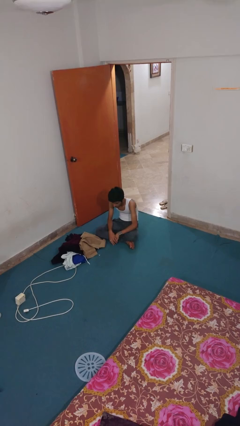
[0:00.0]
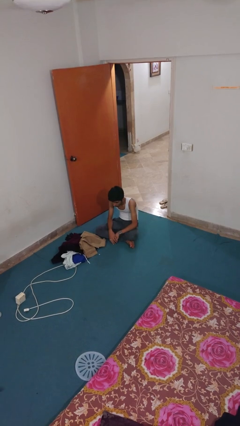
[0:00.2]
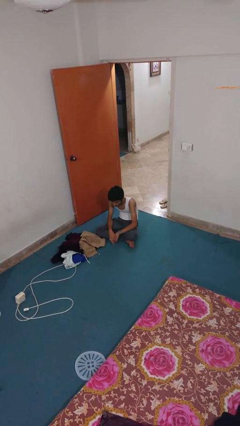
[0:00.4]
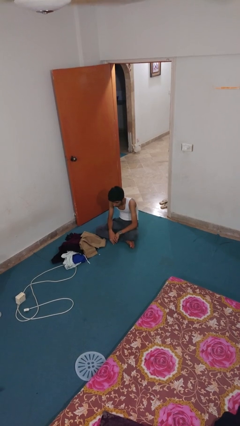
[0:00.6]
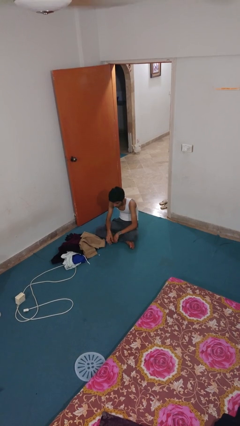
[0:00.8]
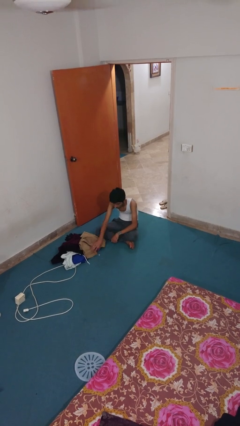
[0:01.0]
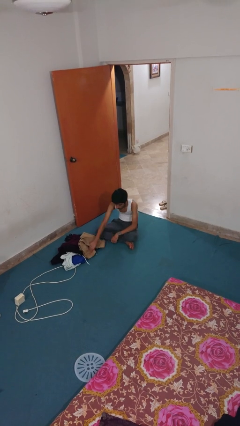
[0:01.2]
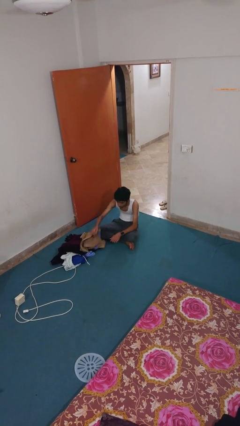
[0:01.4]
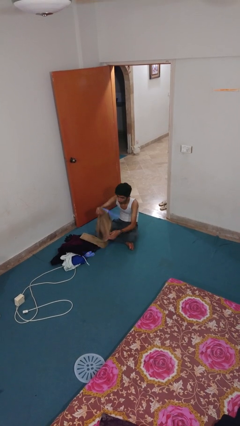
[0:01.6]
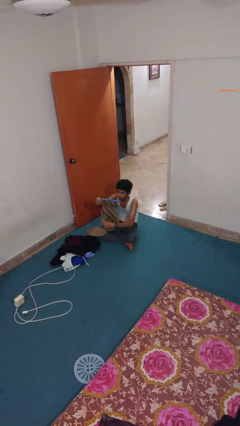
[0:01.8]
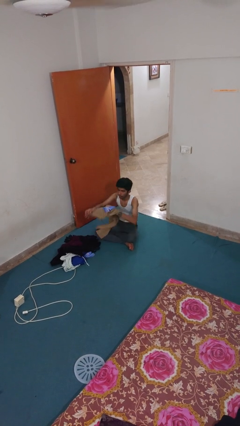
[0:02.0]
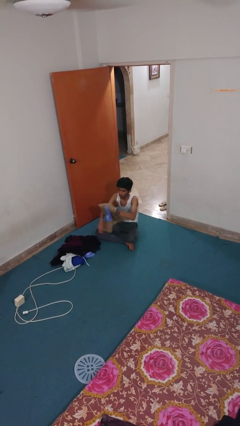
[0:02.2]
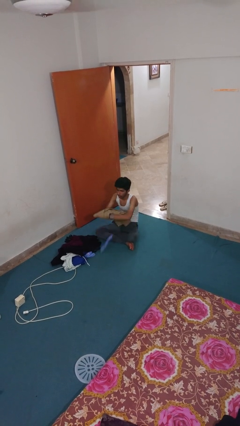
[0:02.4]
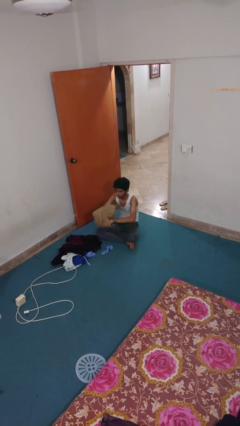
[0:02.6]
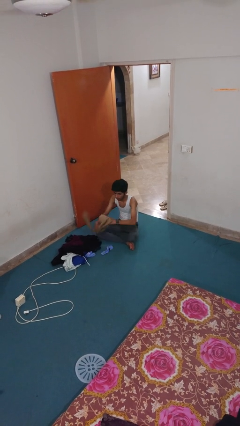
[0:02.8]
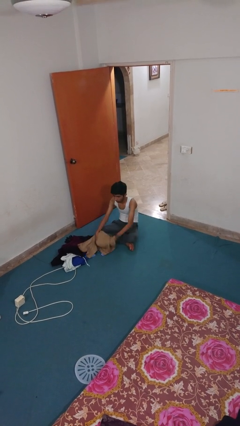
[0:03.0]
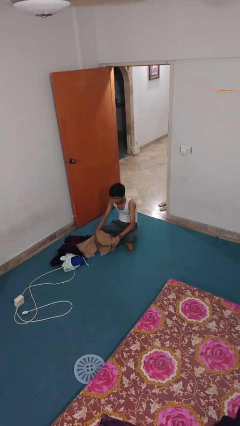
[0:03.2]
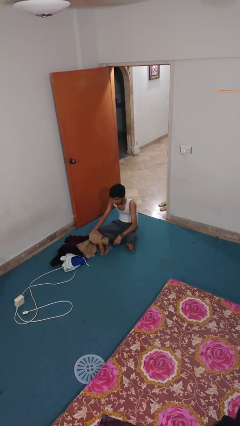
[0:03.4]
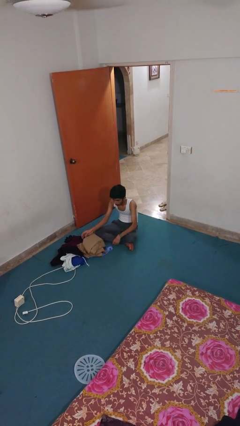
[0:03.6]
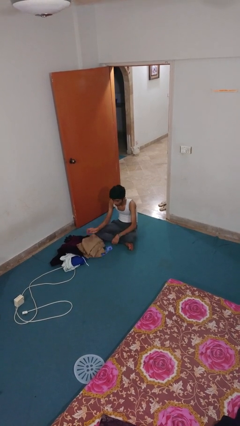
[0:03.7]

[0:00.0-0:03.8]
person folds pants

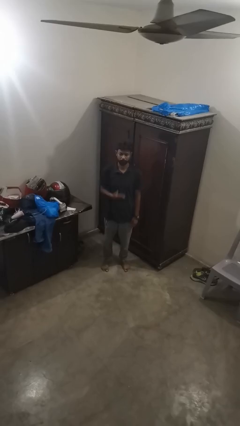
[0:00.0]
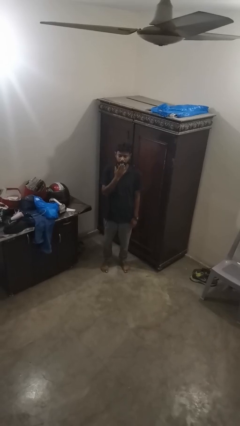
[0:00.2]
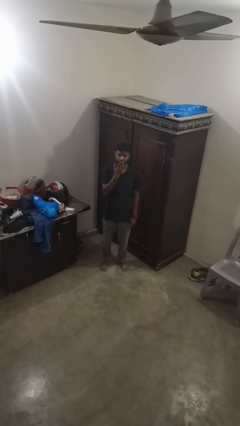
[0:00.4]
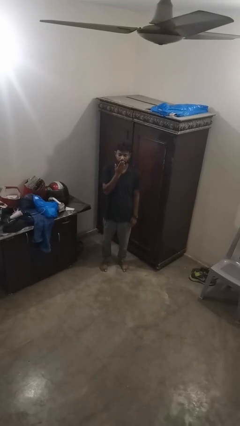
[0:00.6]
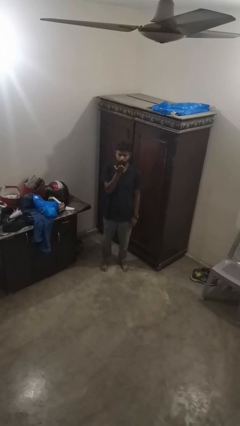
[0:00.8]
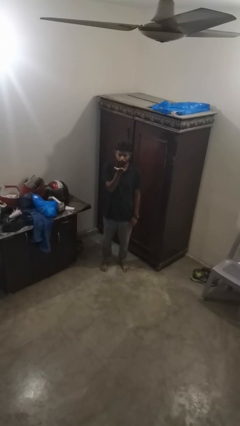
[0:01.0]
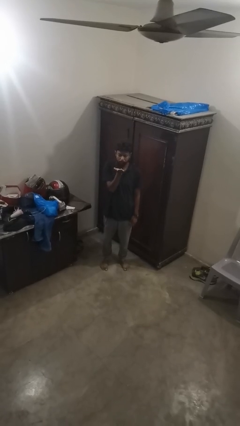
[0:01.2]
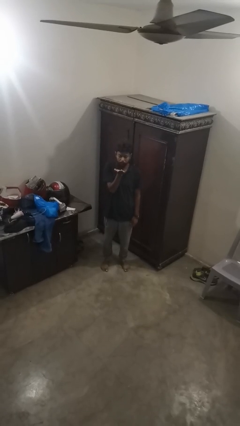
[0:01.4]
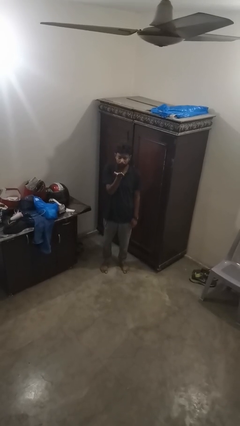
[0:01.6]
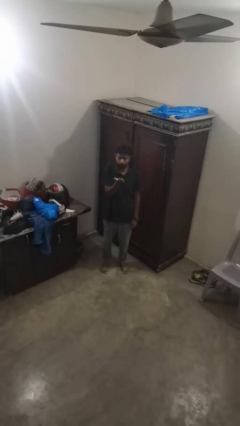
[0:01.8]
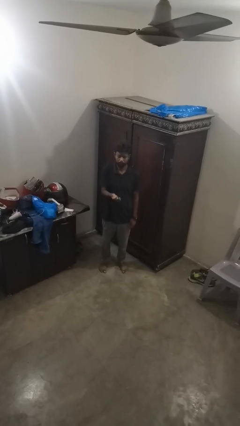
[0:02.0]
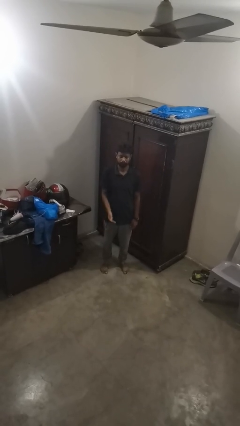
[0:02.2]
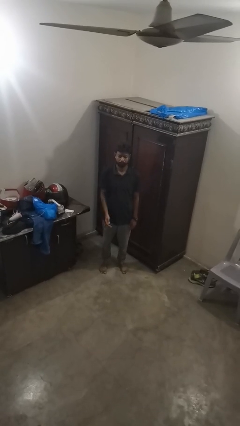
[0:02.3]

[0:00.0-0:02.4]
person gestures blow kiss

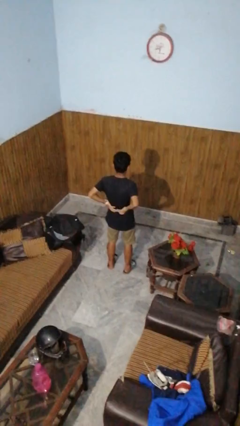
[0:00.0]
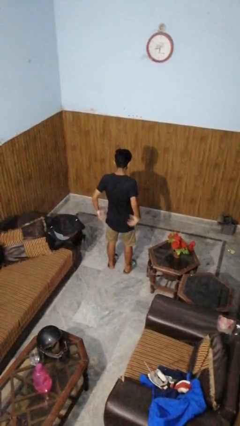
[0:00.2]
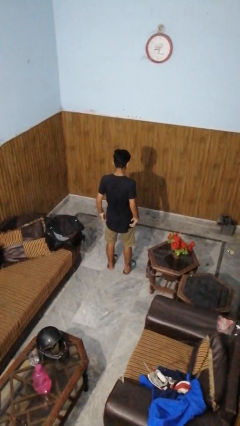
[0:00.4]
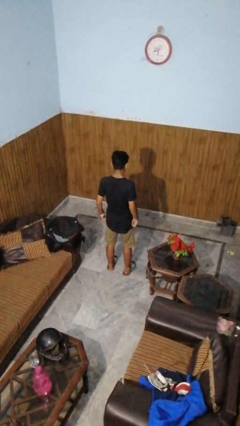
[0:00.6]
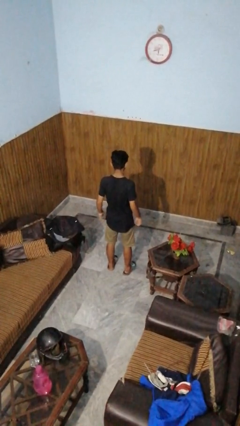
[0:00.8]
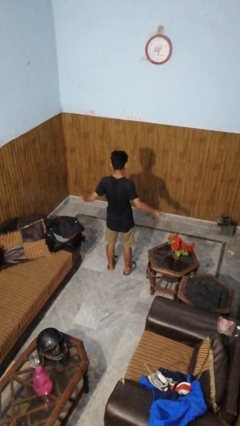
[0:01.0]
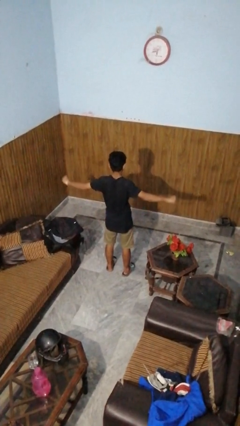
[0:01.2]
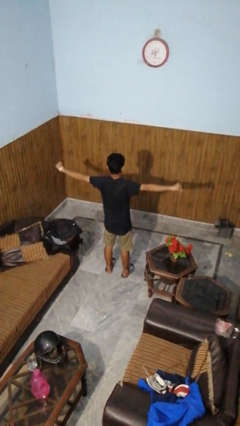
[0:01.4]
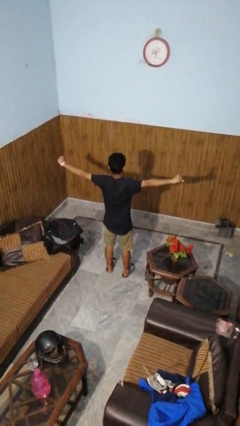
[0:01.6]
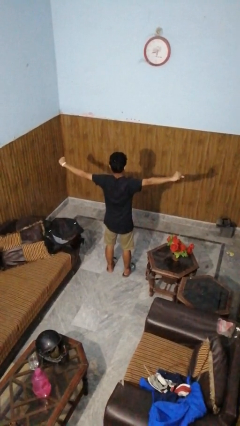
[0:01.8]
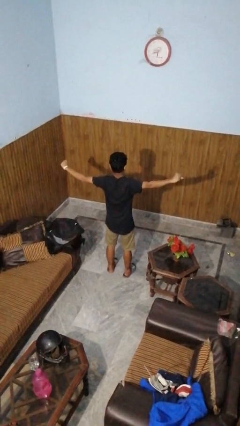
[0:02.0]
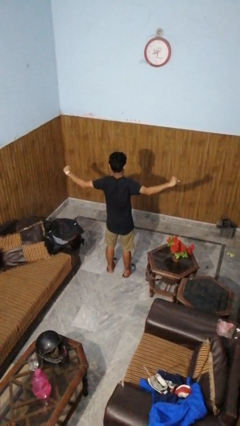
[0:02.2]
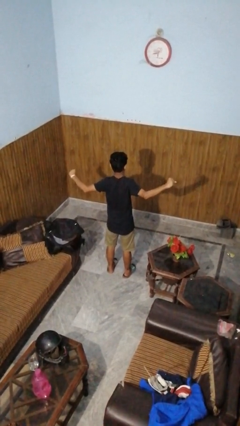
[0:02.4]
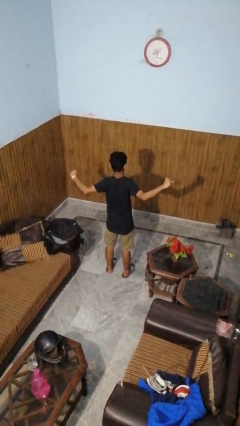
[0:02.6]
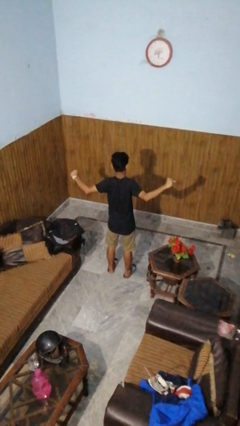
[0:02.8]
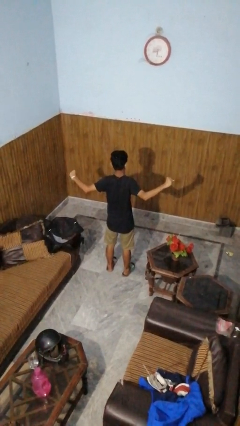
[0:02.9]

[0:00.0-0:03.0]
person stretches arms to side

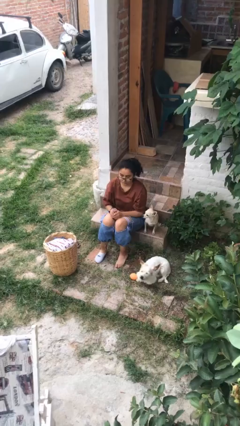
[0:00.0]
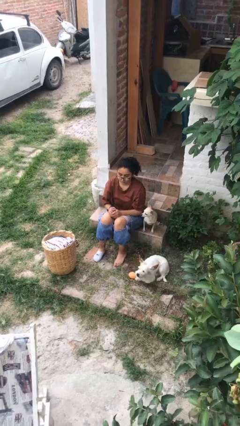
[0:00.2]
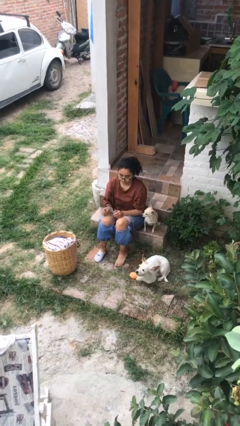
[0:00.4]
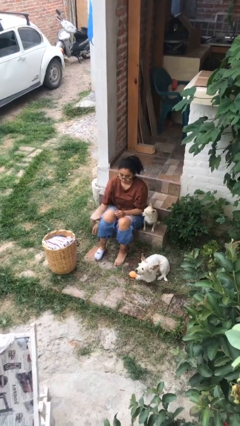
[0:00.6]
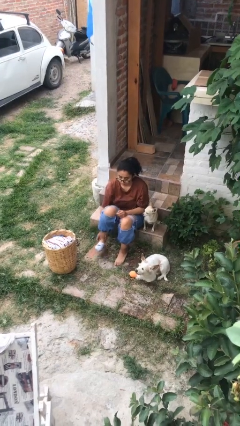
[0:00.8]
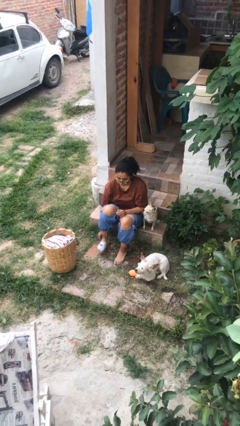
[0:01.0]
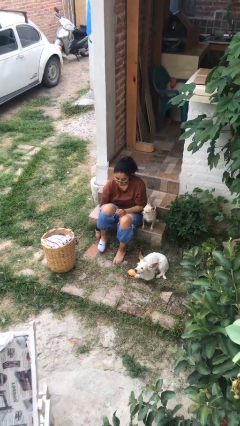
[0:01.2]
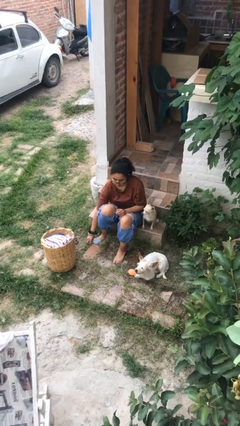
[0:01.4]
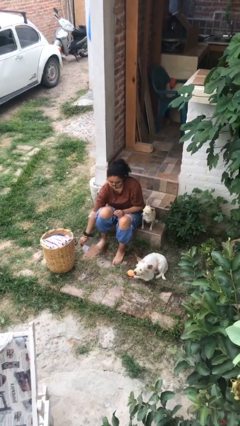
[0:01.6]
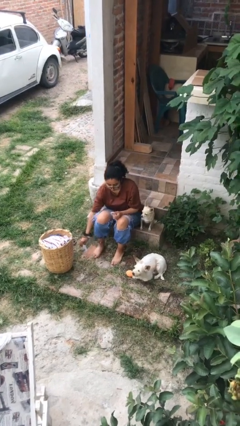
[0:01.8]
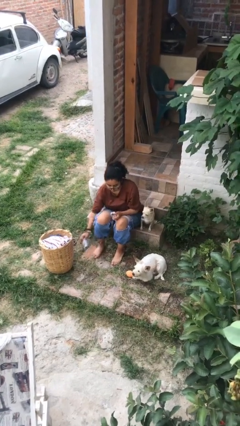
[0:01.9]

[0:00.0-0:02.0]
person takes off socks

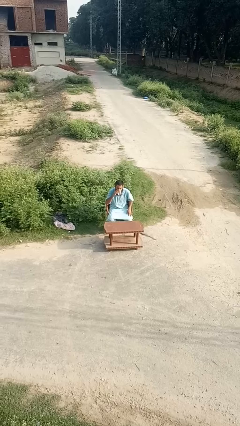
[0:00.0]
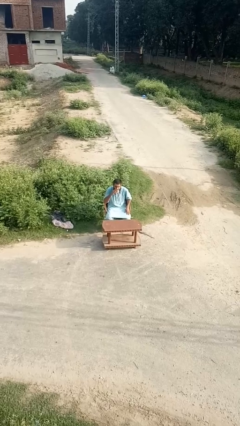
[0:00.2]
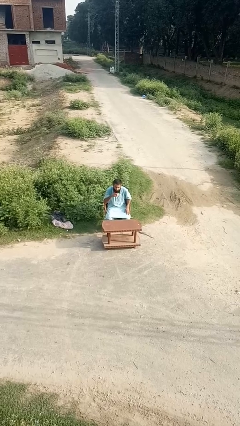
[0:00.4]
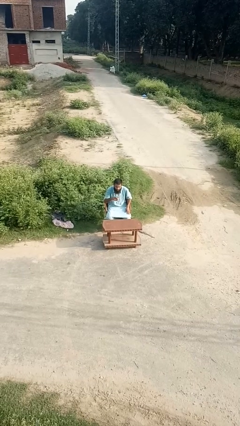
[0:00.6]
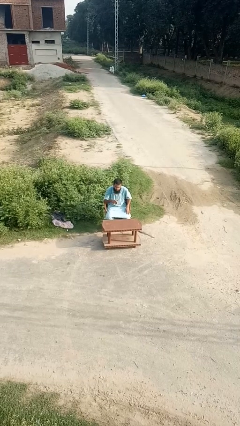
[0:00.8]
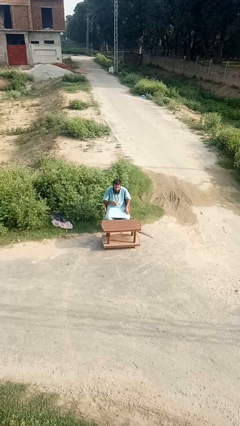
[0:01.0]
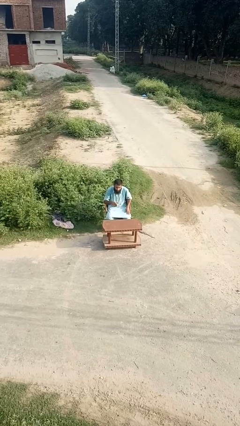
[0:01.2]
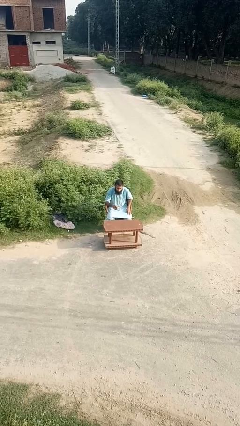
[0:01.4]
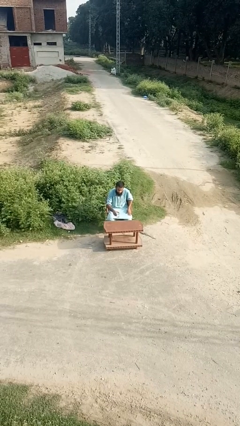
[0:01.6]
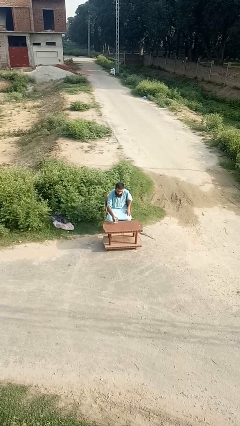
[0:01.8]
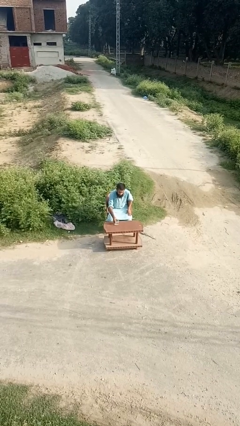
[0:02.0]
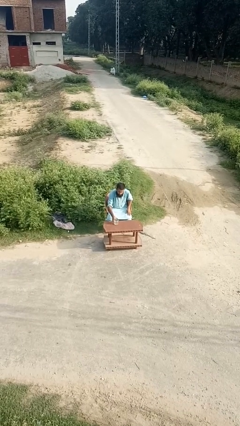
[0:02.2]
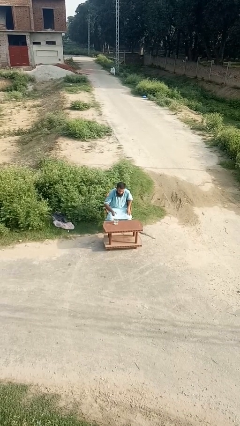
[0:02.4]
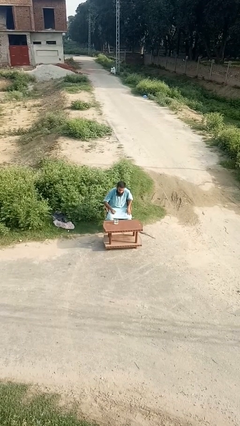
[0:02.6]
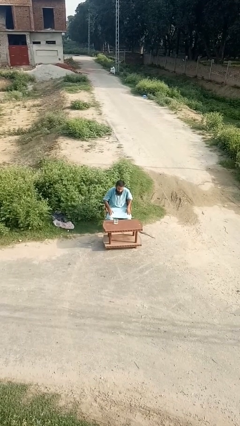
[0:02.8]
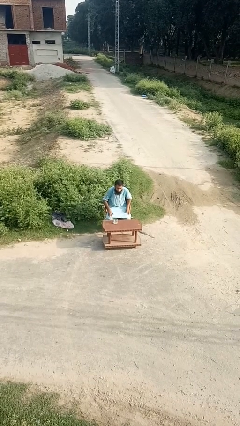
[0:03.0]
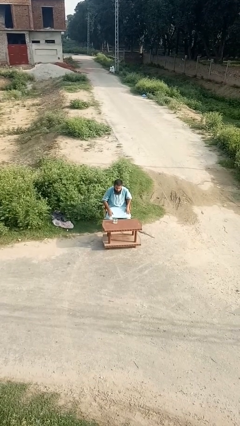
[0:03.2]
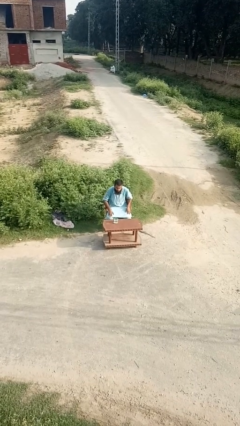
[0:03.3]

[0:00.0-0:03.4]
person puts down object on table

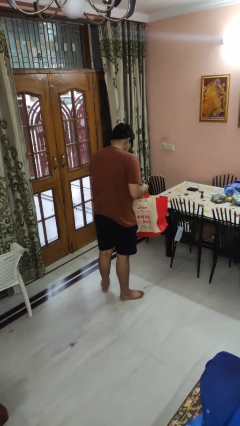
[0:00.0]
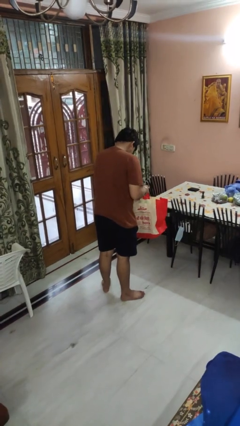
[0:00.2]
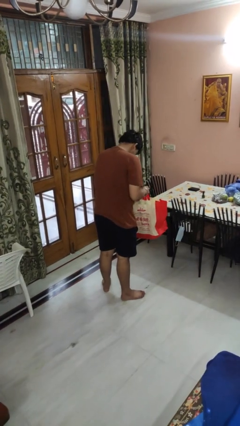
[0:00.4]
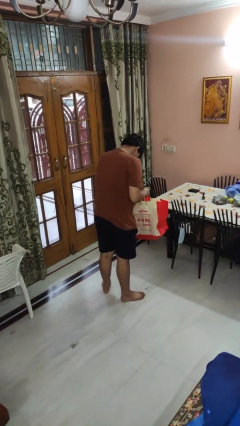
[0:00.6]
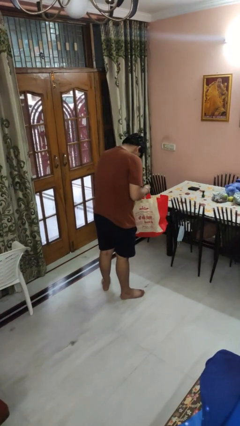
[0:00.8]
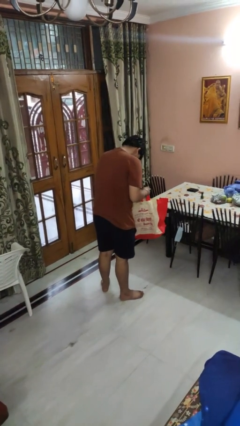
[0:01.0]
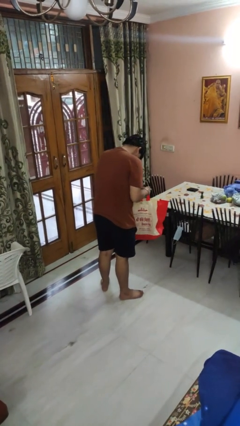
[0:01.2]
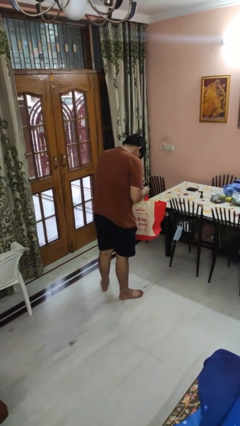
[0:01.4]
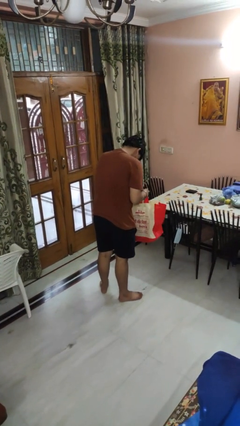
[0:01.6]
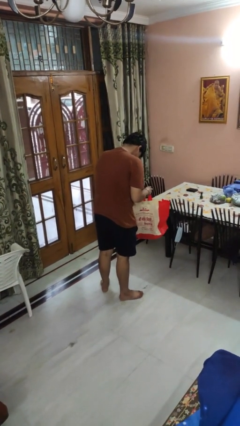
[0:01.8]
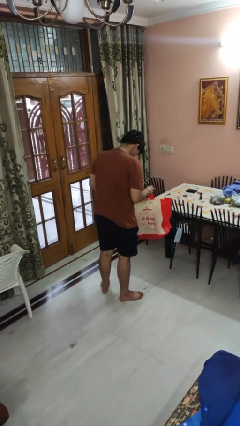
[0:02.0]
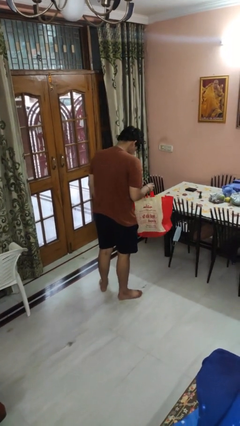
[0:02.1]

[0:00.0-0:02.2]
person searches in bag

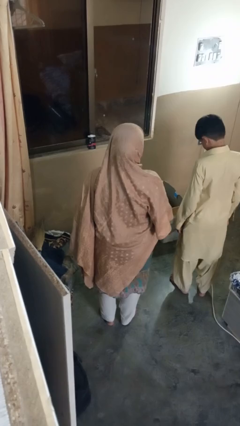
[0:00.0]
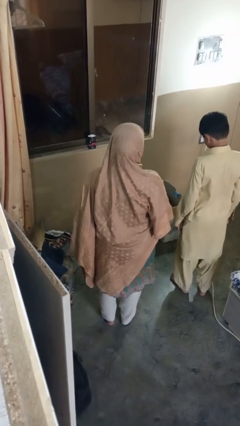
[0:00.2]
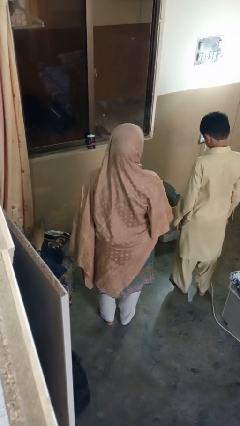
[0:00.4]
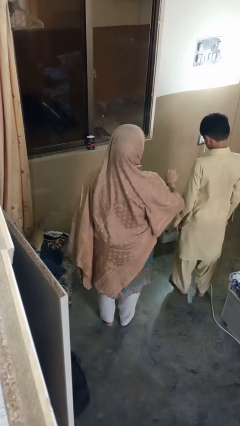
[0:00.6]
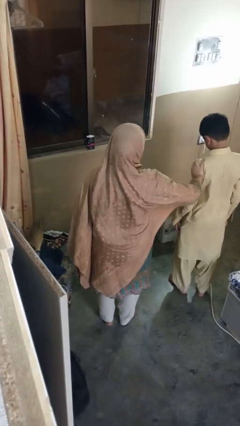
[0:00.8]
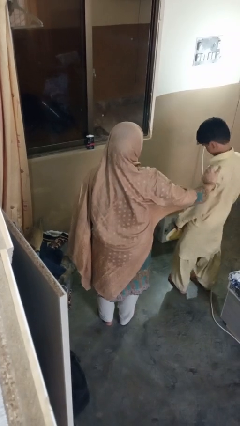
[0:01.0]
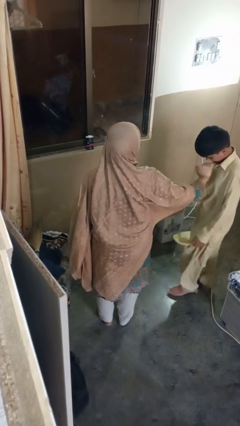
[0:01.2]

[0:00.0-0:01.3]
person grabs person by shoulder
